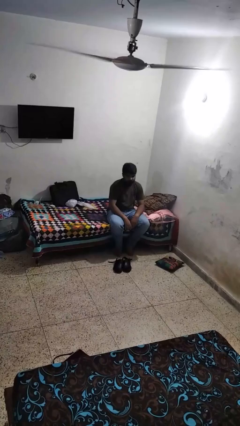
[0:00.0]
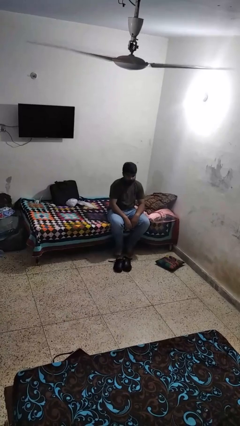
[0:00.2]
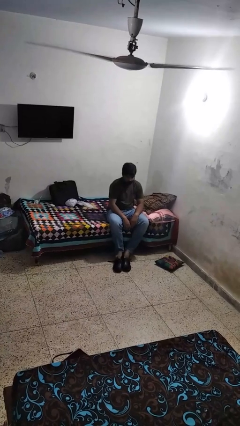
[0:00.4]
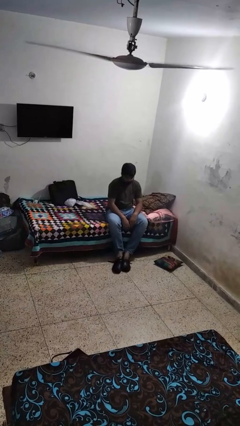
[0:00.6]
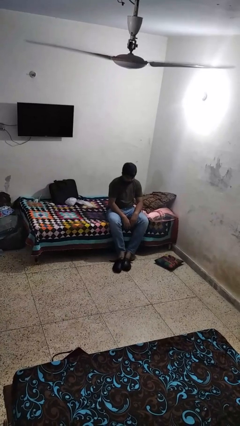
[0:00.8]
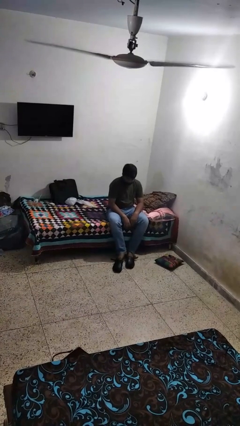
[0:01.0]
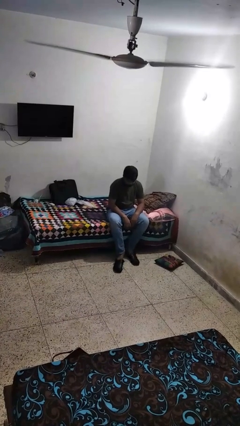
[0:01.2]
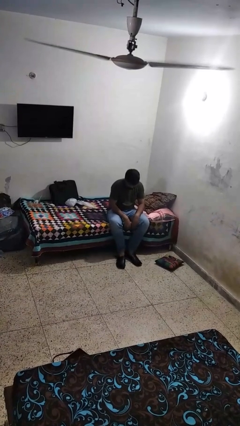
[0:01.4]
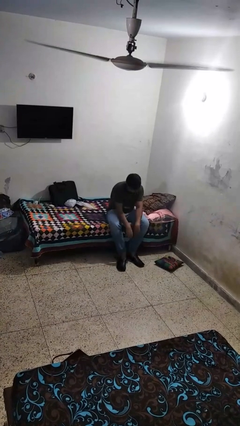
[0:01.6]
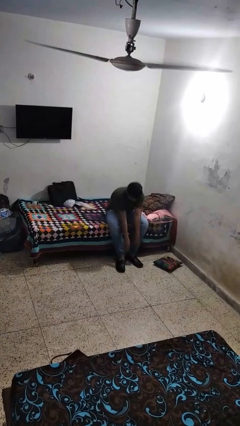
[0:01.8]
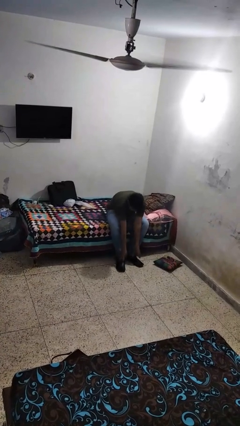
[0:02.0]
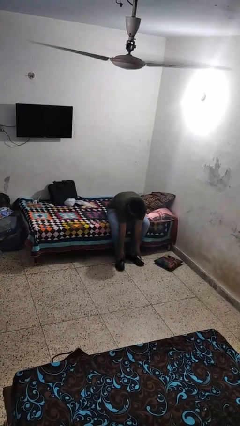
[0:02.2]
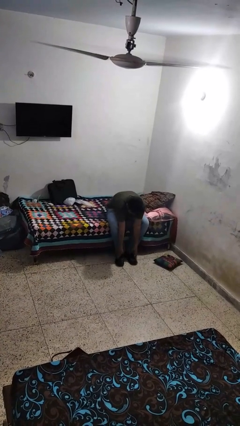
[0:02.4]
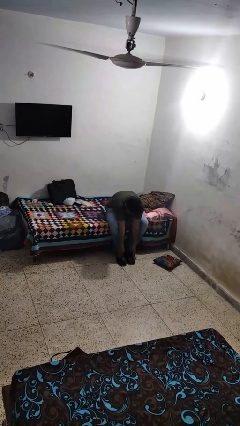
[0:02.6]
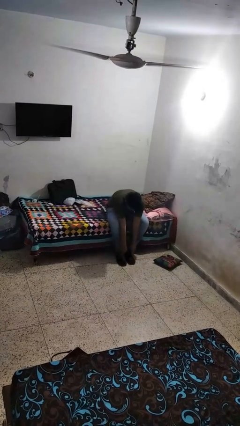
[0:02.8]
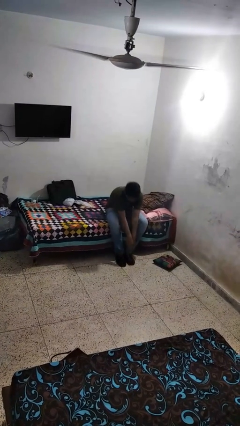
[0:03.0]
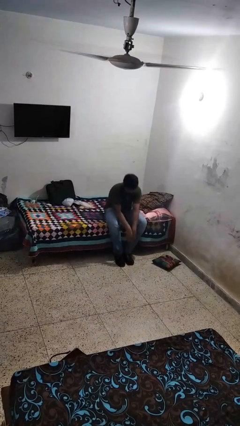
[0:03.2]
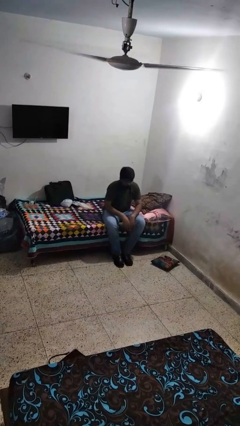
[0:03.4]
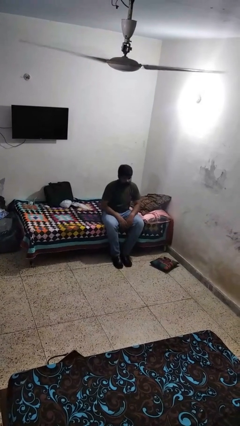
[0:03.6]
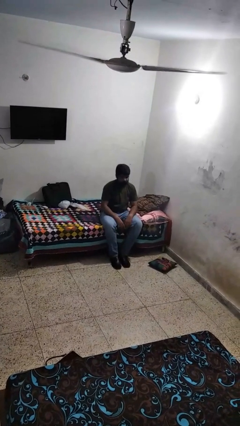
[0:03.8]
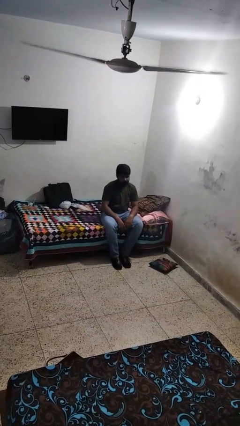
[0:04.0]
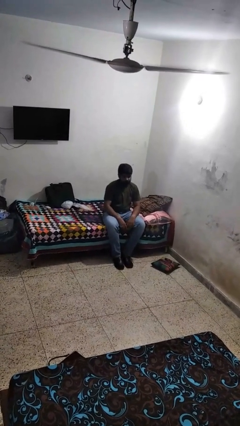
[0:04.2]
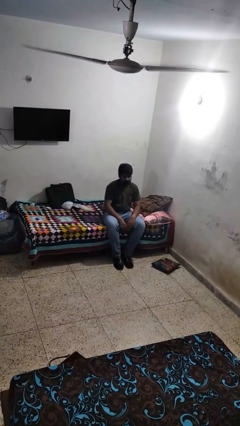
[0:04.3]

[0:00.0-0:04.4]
person puts on shoes

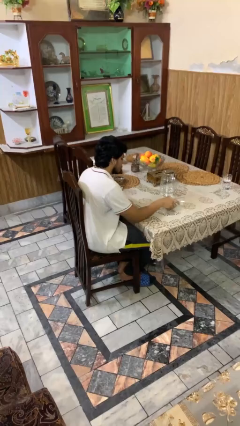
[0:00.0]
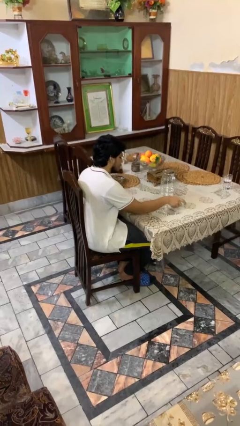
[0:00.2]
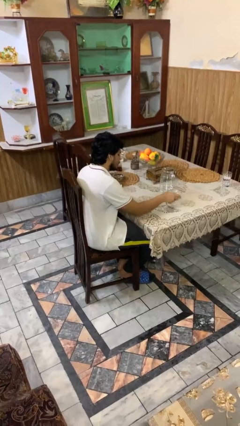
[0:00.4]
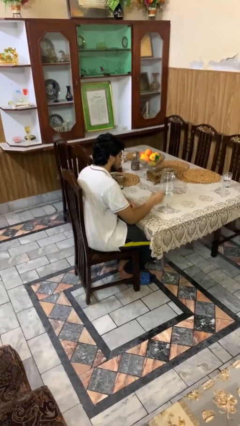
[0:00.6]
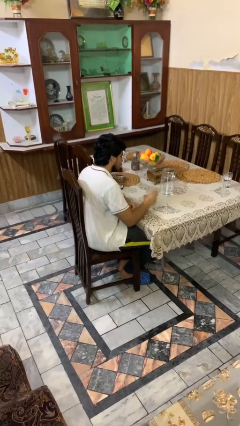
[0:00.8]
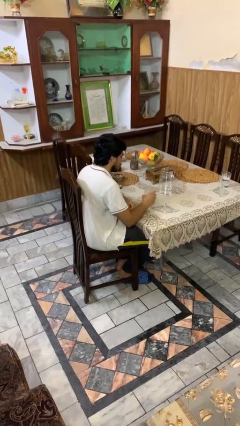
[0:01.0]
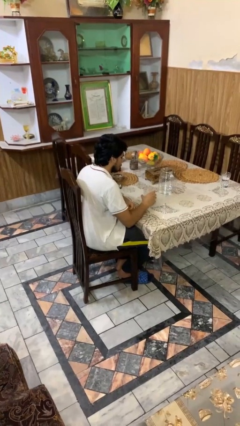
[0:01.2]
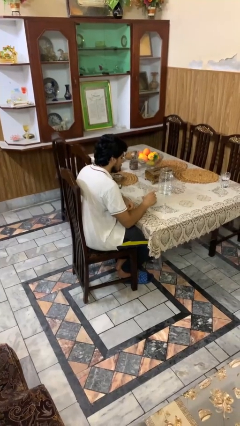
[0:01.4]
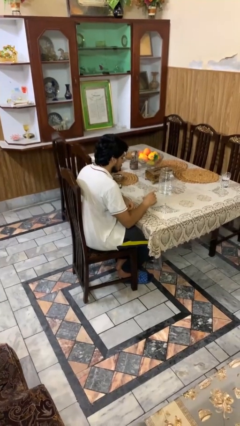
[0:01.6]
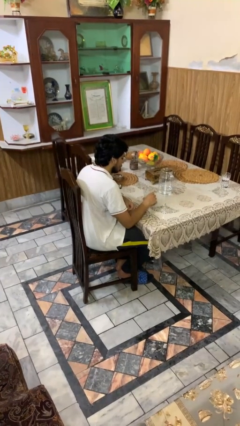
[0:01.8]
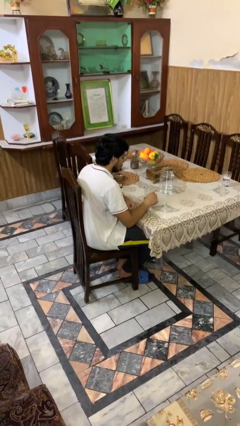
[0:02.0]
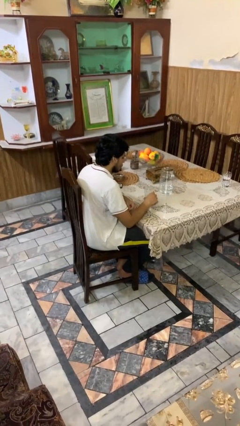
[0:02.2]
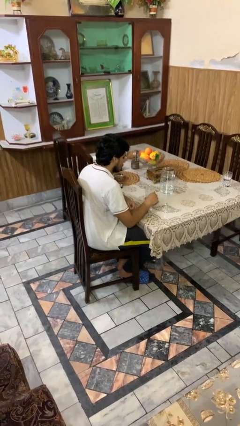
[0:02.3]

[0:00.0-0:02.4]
person sets upright glass

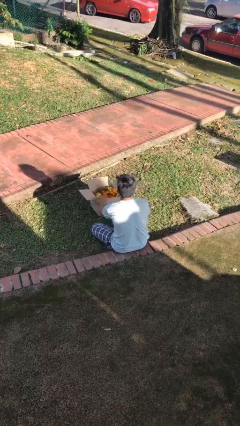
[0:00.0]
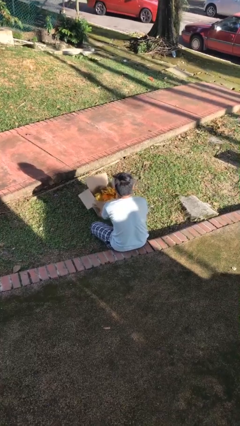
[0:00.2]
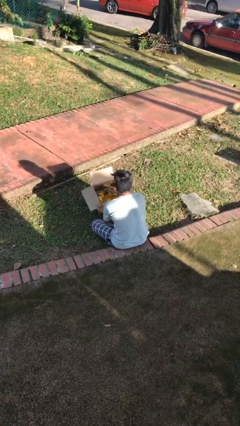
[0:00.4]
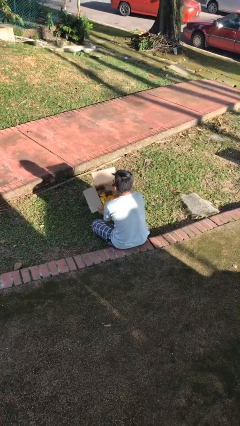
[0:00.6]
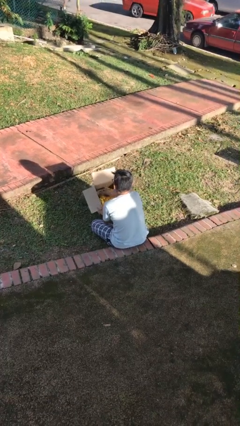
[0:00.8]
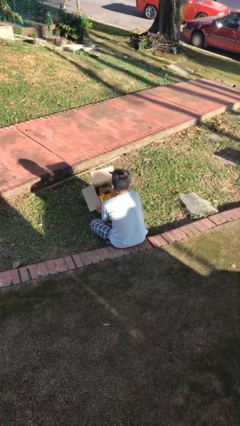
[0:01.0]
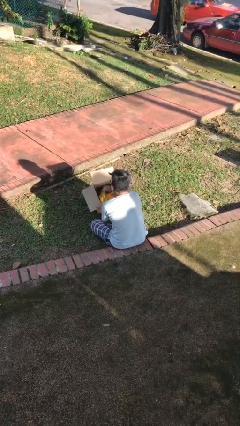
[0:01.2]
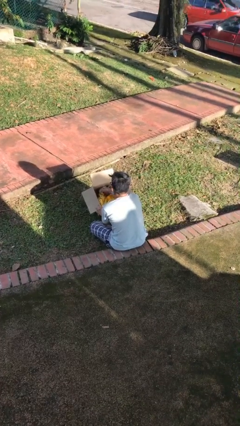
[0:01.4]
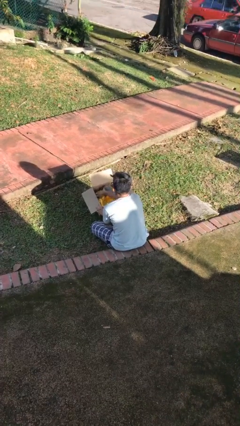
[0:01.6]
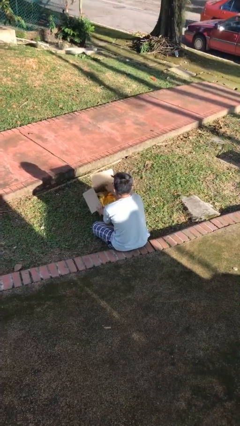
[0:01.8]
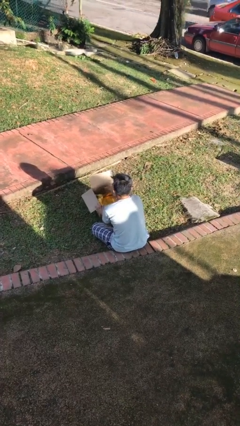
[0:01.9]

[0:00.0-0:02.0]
person searches in box

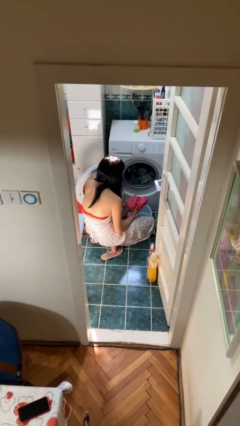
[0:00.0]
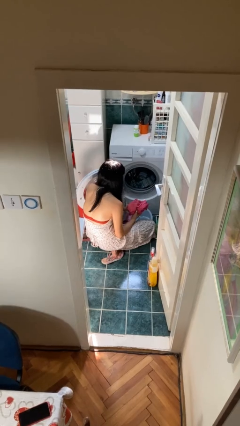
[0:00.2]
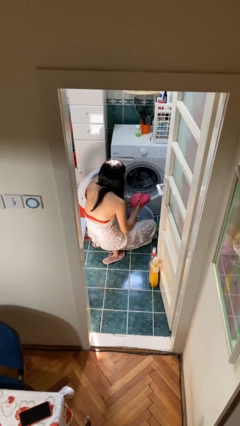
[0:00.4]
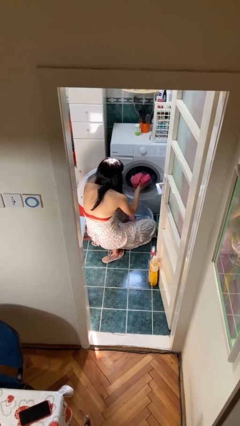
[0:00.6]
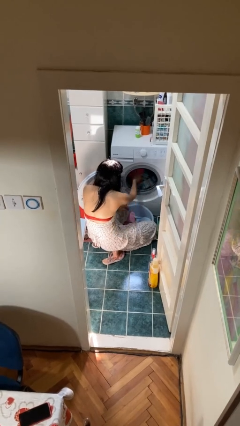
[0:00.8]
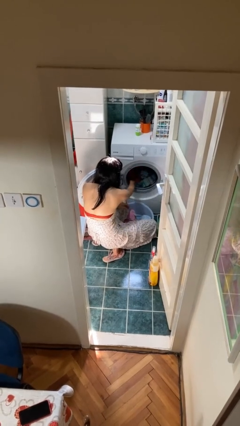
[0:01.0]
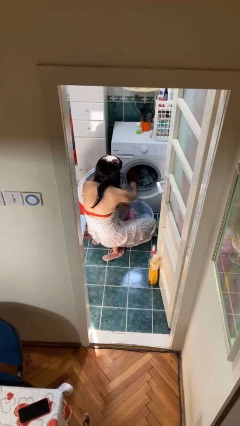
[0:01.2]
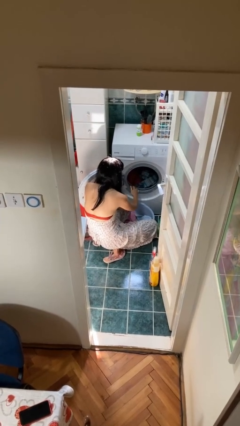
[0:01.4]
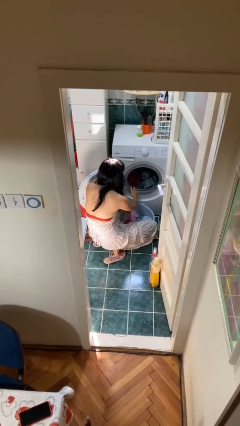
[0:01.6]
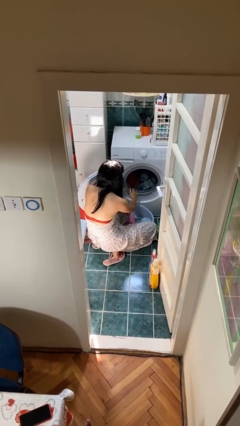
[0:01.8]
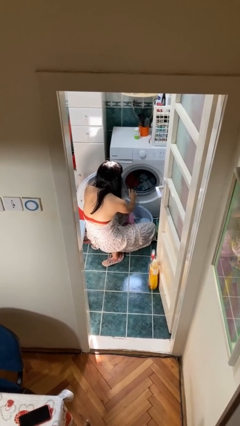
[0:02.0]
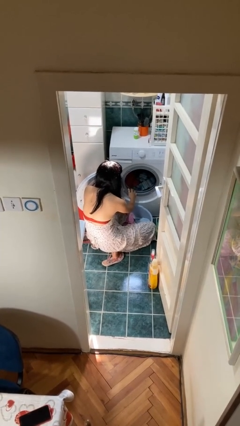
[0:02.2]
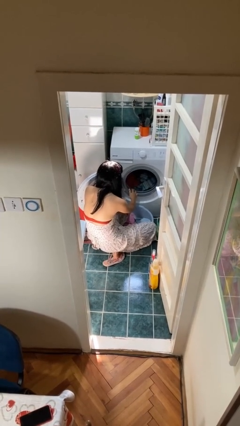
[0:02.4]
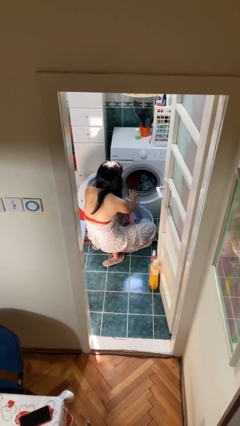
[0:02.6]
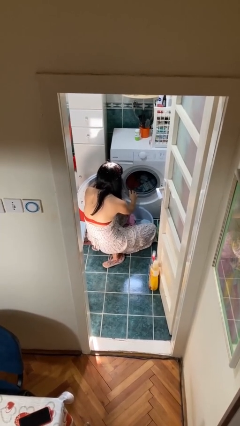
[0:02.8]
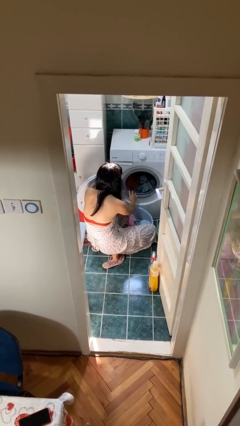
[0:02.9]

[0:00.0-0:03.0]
person loads clotheswasher

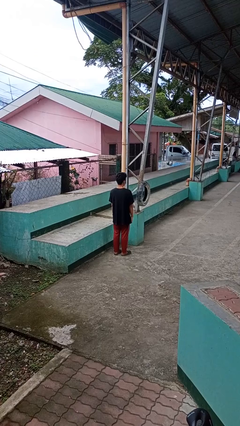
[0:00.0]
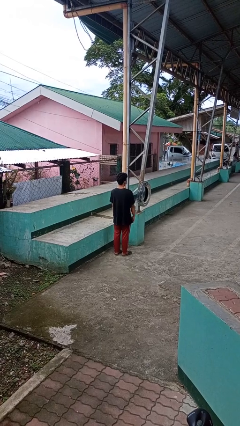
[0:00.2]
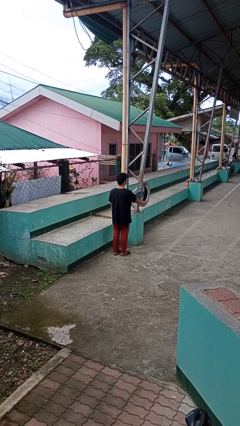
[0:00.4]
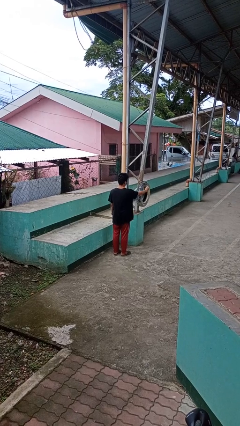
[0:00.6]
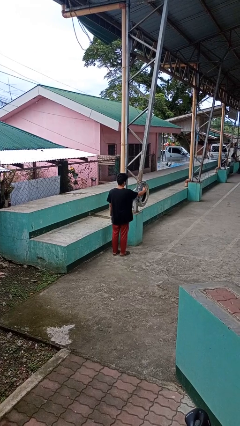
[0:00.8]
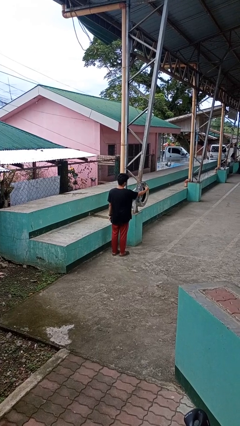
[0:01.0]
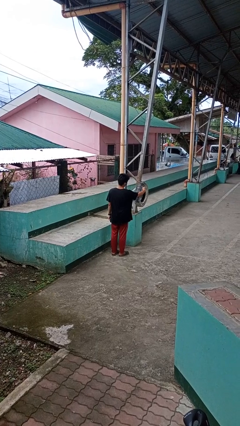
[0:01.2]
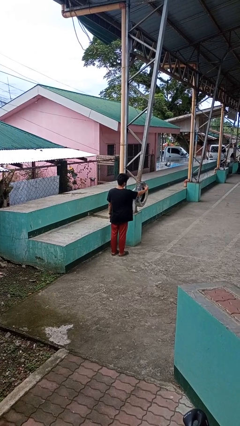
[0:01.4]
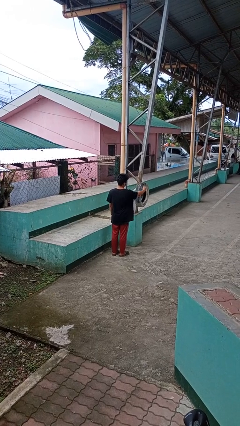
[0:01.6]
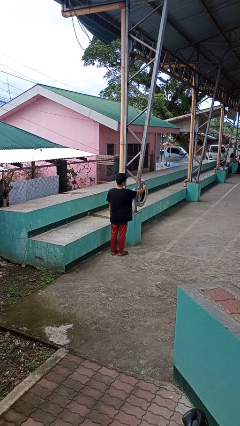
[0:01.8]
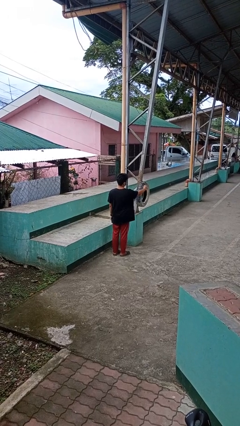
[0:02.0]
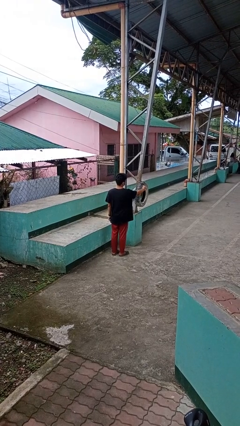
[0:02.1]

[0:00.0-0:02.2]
person taps object with finger

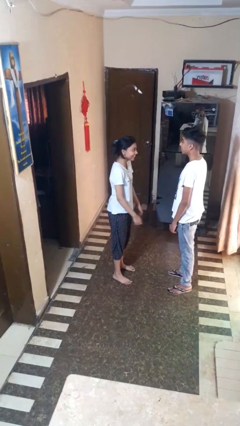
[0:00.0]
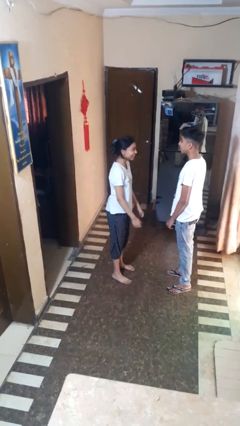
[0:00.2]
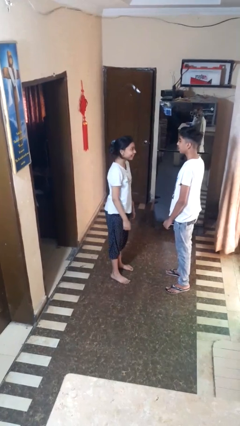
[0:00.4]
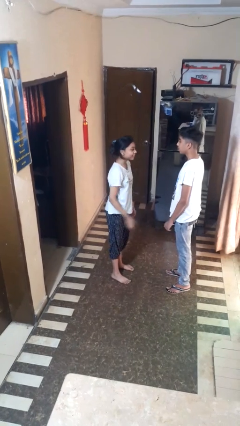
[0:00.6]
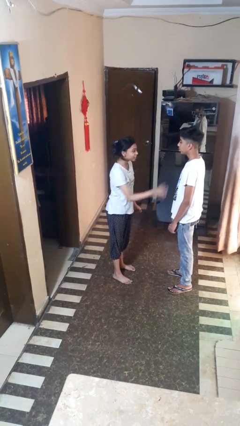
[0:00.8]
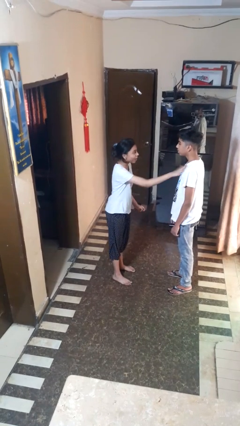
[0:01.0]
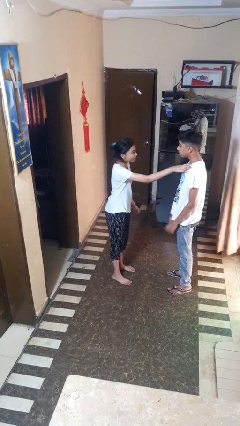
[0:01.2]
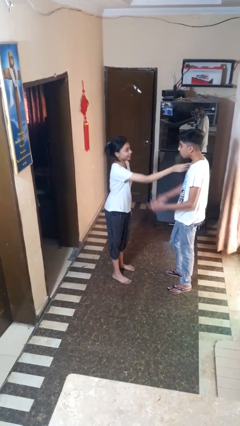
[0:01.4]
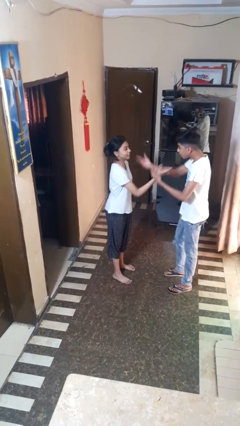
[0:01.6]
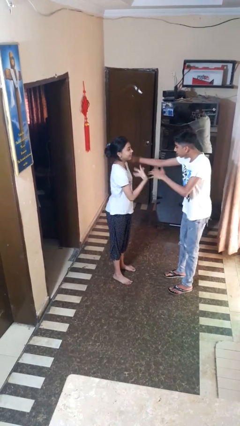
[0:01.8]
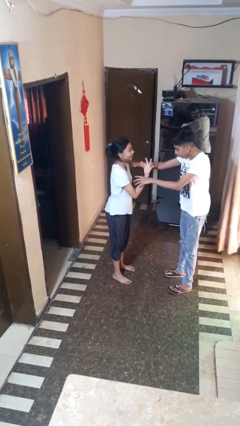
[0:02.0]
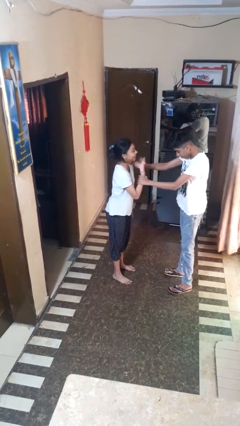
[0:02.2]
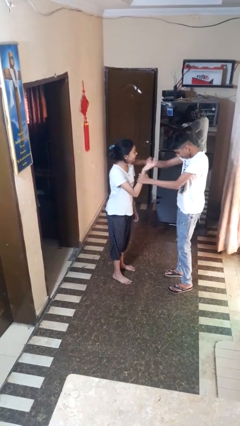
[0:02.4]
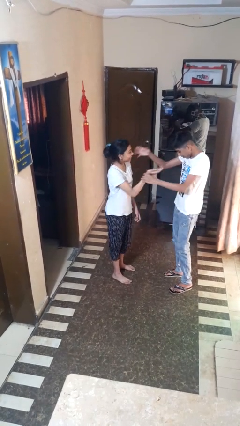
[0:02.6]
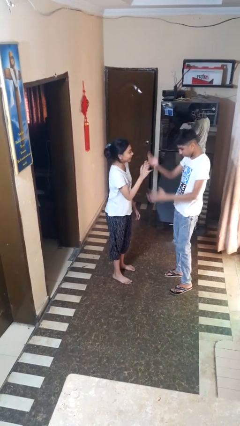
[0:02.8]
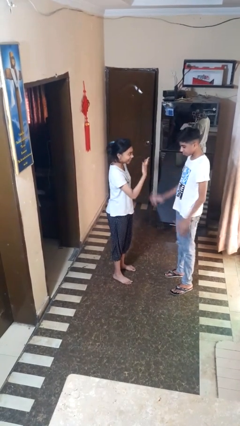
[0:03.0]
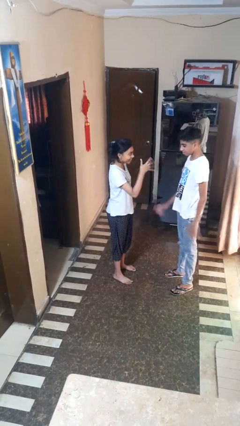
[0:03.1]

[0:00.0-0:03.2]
person shoves person

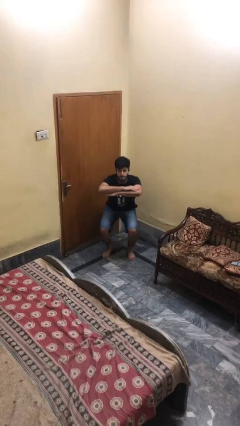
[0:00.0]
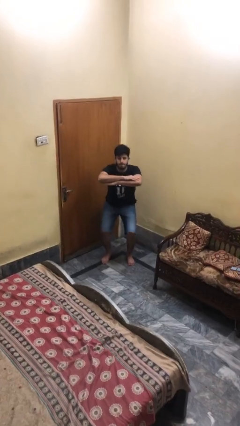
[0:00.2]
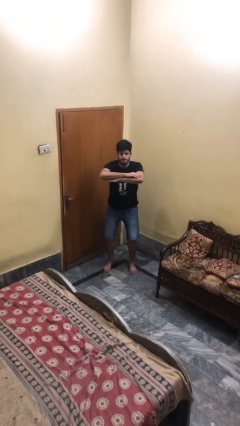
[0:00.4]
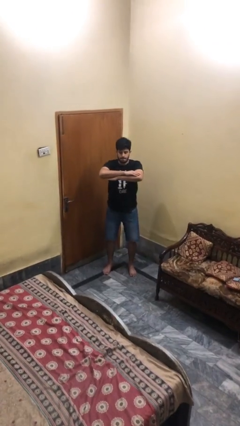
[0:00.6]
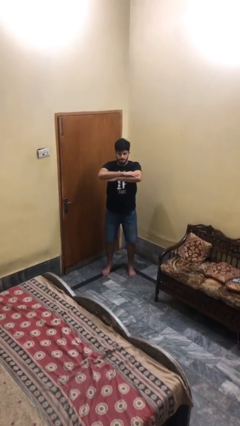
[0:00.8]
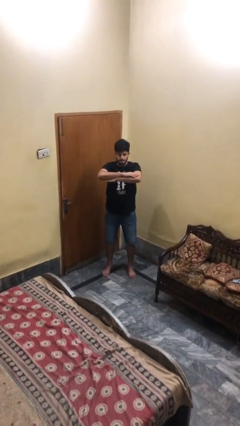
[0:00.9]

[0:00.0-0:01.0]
person stands up
